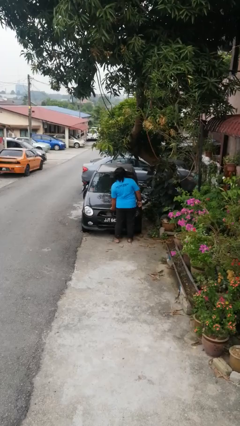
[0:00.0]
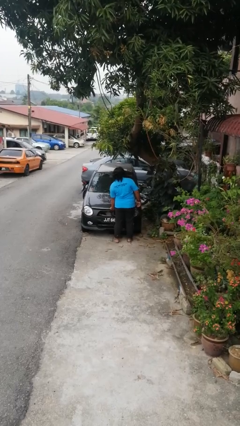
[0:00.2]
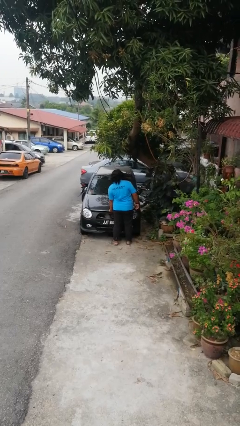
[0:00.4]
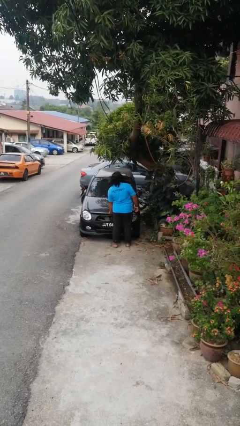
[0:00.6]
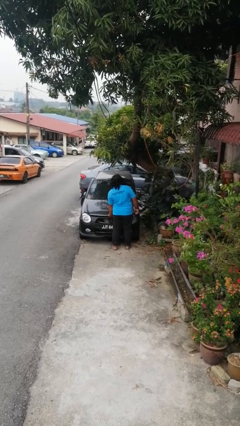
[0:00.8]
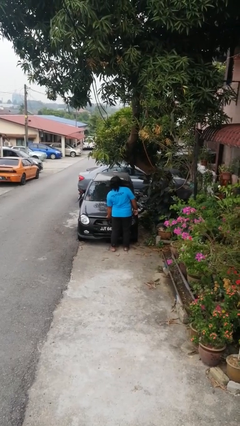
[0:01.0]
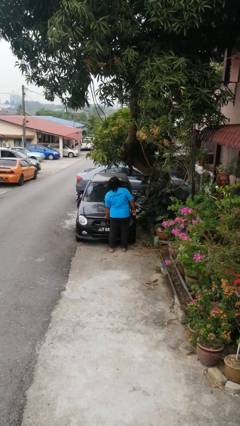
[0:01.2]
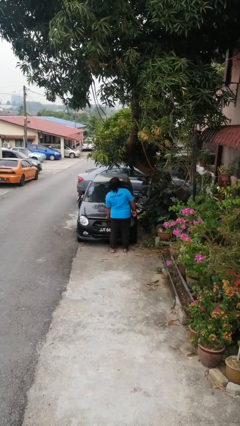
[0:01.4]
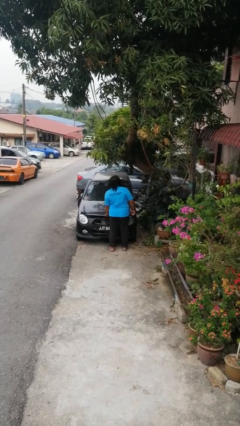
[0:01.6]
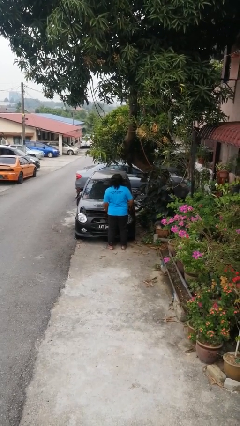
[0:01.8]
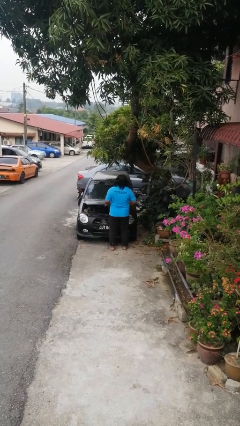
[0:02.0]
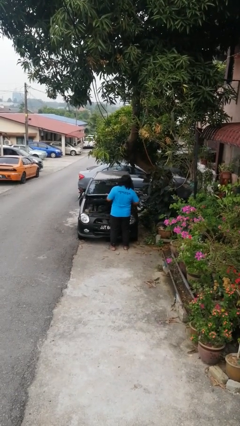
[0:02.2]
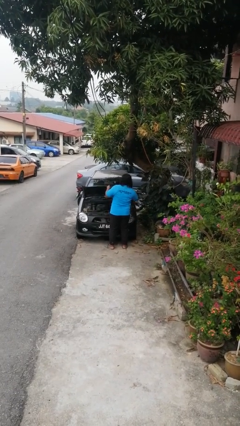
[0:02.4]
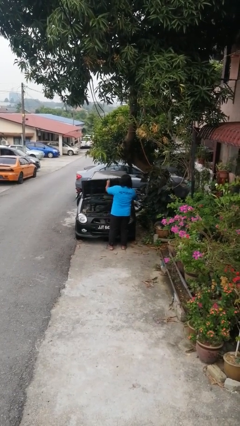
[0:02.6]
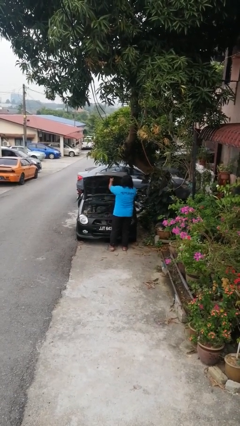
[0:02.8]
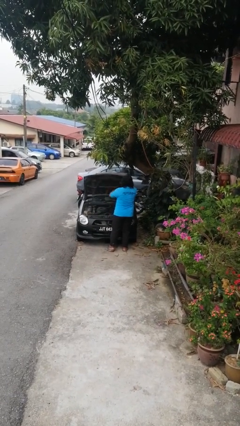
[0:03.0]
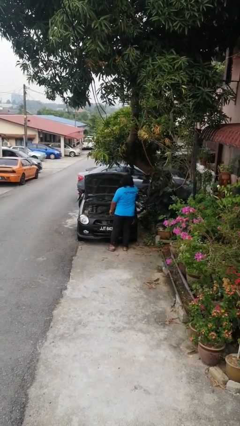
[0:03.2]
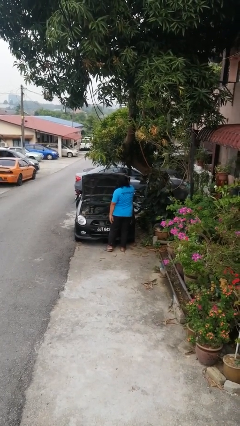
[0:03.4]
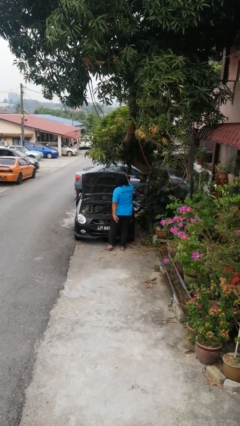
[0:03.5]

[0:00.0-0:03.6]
person opens car hood

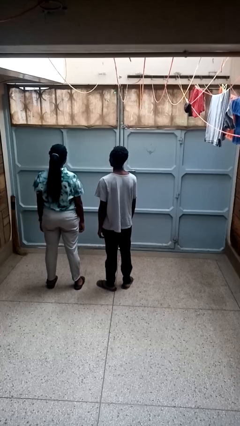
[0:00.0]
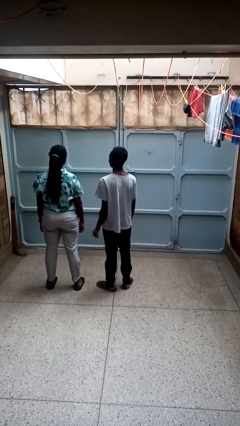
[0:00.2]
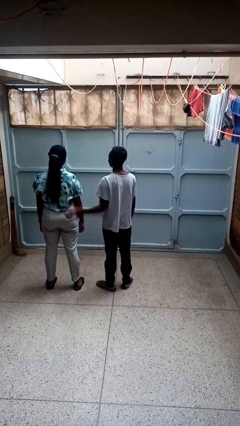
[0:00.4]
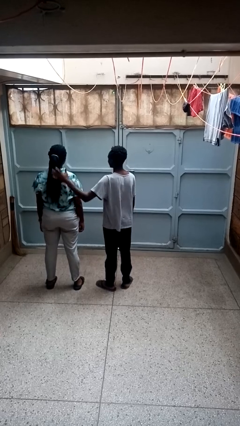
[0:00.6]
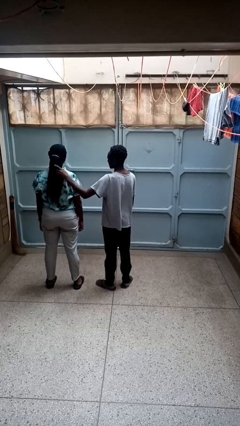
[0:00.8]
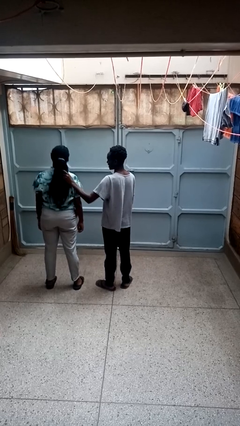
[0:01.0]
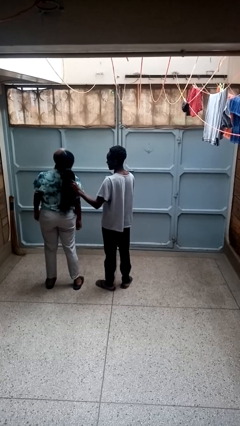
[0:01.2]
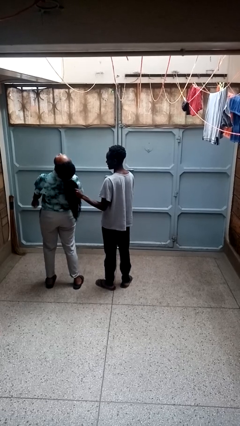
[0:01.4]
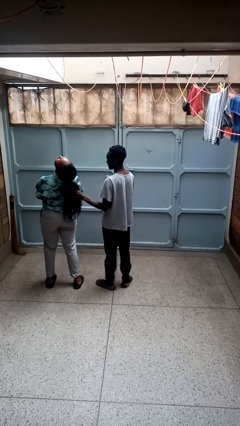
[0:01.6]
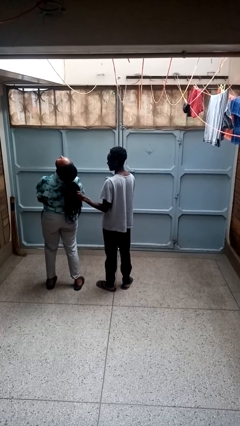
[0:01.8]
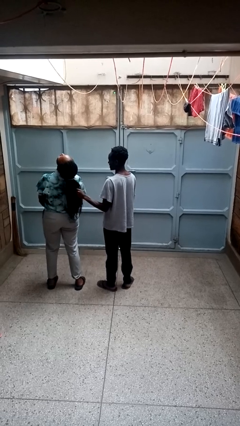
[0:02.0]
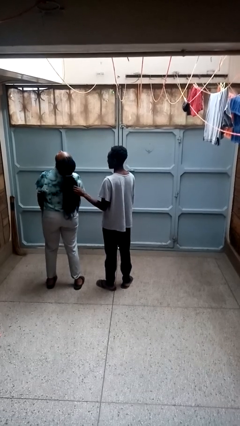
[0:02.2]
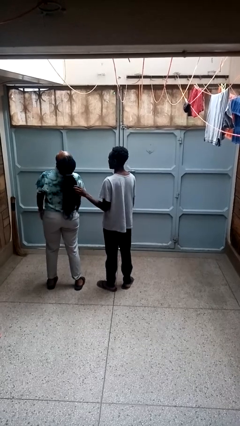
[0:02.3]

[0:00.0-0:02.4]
person grabs person by hair

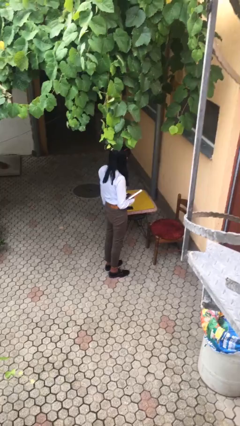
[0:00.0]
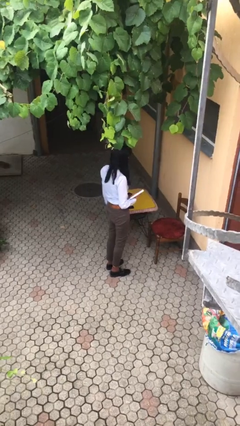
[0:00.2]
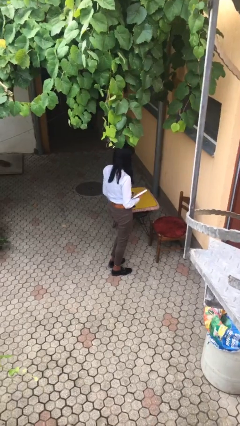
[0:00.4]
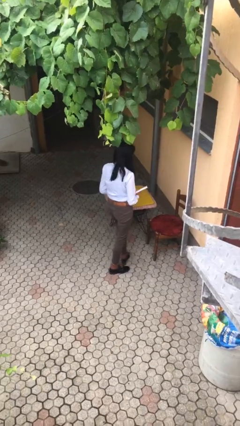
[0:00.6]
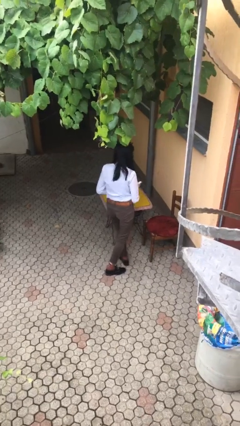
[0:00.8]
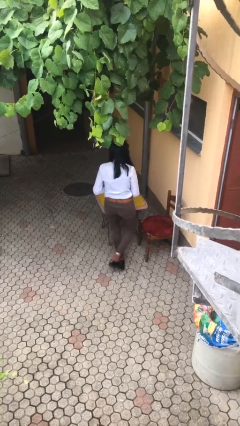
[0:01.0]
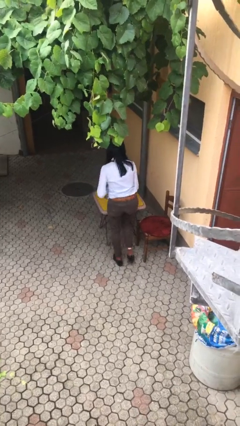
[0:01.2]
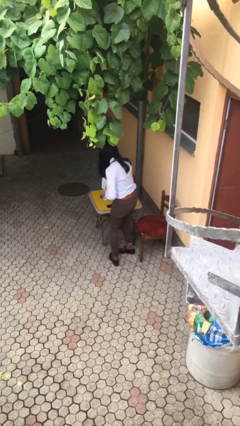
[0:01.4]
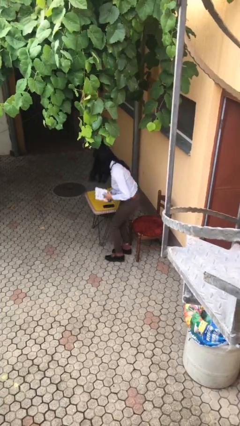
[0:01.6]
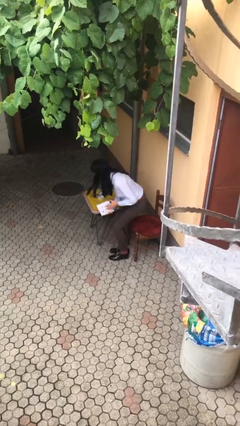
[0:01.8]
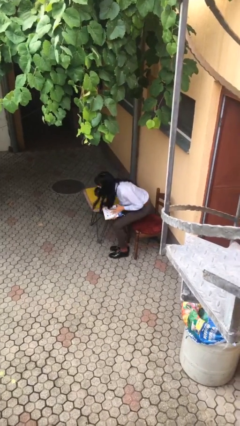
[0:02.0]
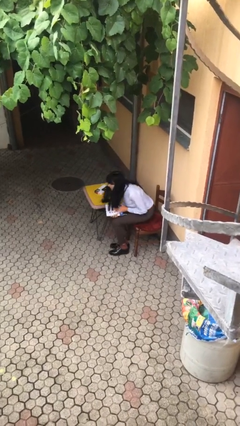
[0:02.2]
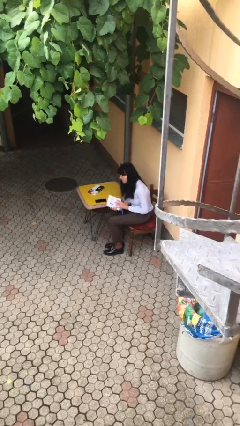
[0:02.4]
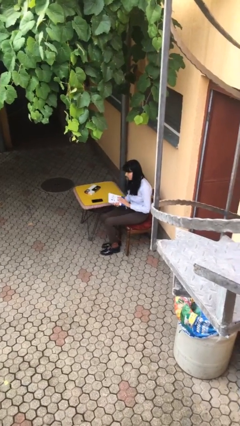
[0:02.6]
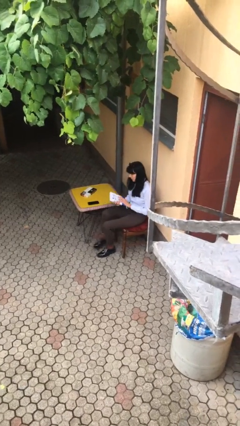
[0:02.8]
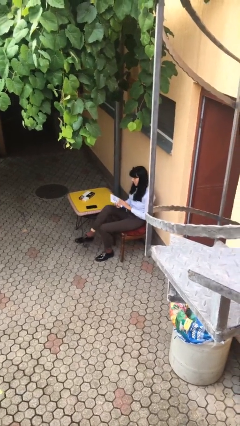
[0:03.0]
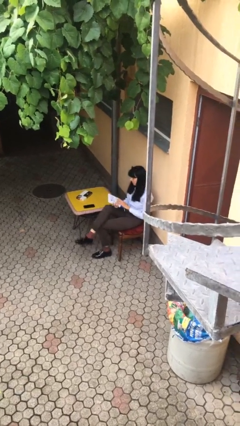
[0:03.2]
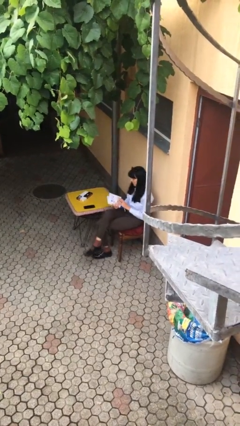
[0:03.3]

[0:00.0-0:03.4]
person sits down

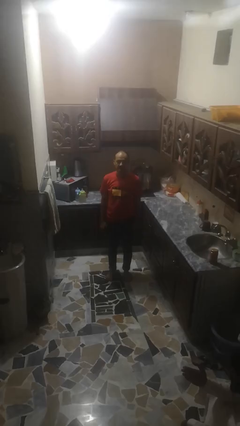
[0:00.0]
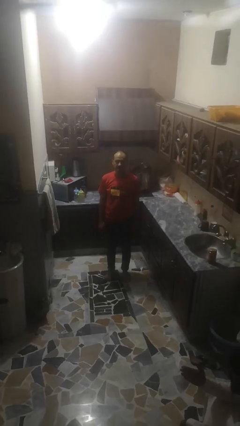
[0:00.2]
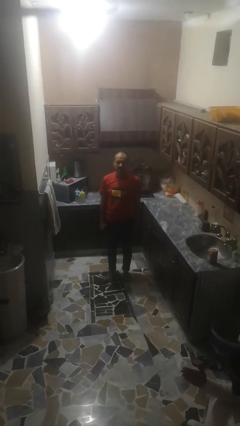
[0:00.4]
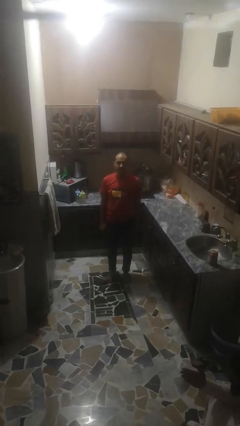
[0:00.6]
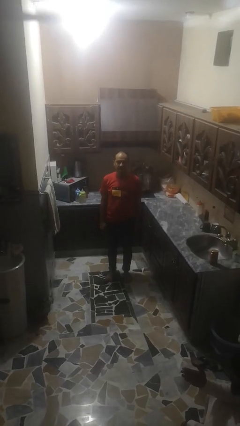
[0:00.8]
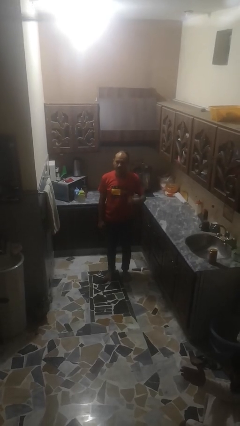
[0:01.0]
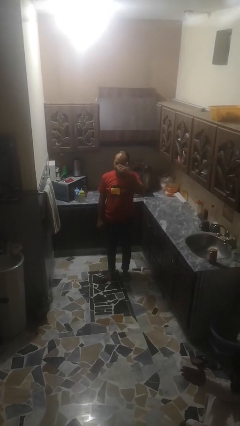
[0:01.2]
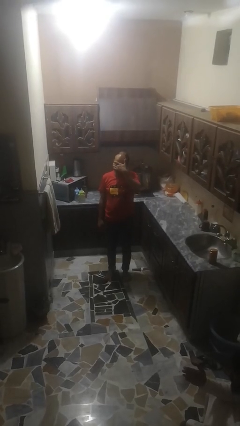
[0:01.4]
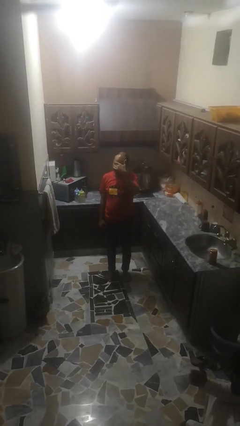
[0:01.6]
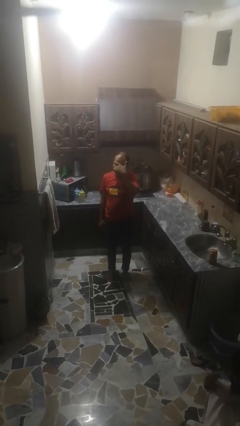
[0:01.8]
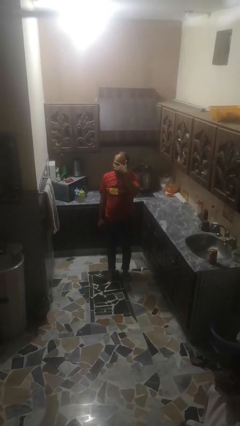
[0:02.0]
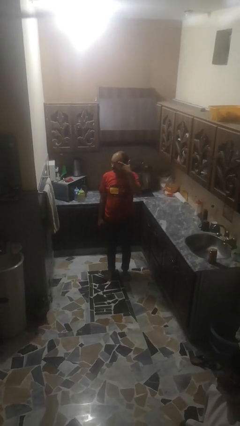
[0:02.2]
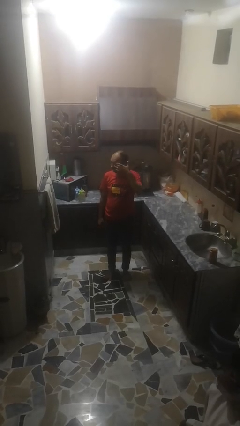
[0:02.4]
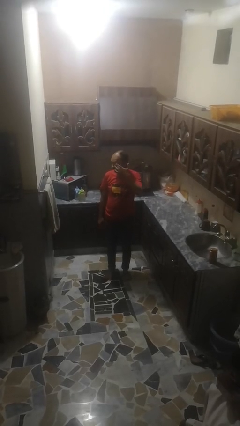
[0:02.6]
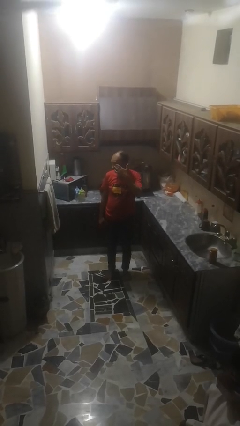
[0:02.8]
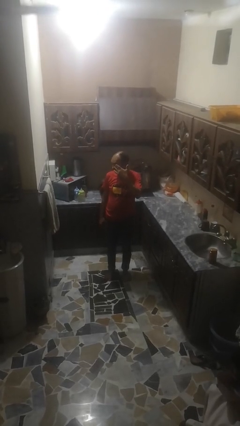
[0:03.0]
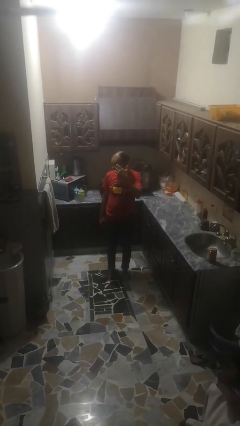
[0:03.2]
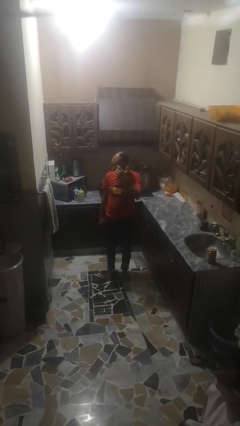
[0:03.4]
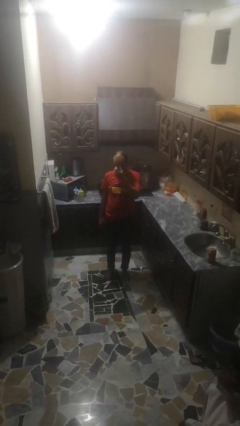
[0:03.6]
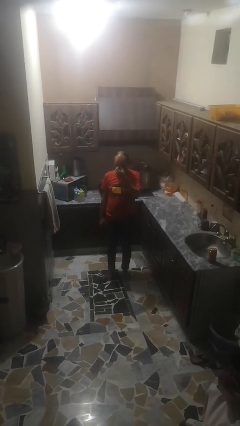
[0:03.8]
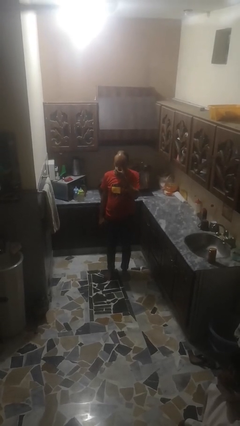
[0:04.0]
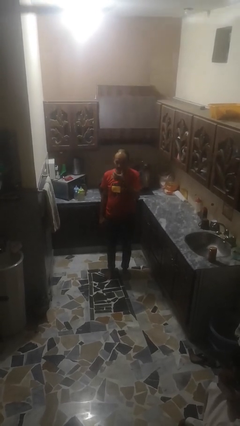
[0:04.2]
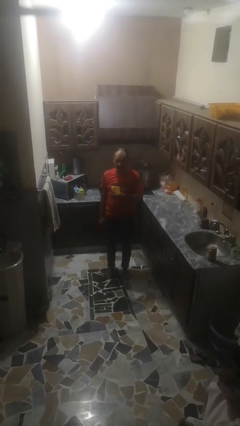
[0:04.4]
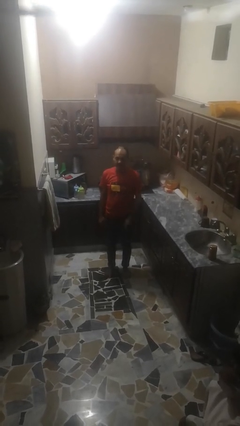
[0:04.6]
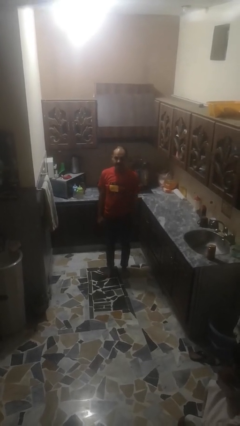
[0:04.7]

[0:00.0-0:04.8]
person rubs eyes

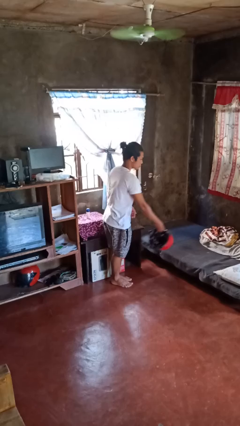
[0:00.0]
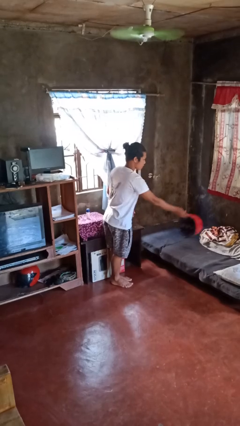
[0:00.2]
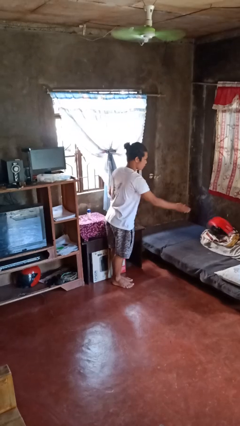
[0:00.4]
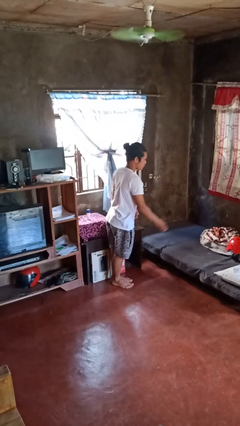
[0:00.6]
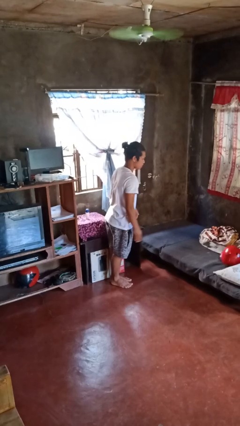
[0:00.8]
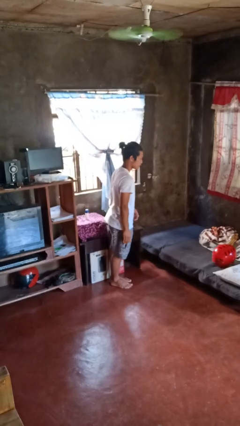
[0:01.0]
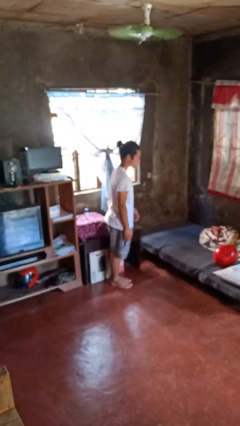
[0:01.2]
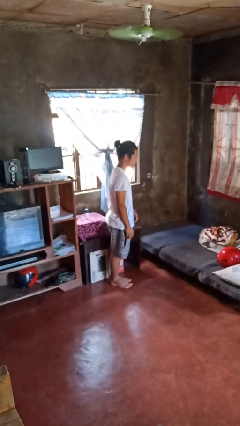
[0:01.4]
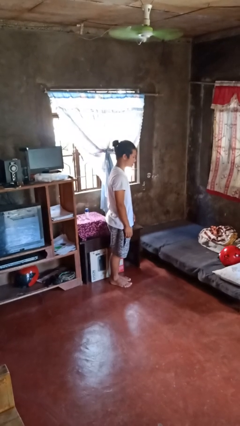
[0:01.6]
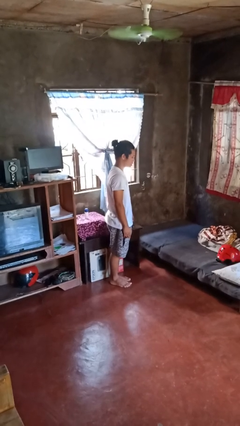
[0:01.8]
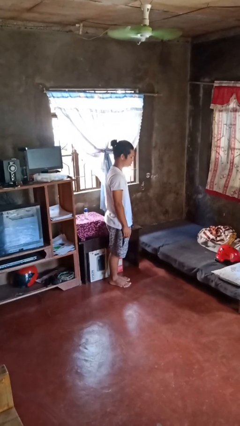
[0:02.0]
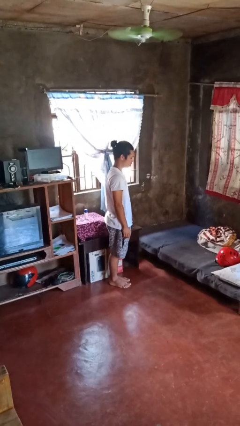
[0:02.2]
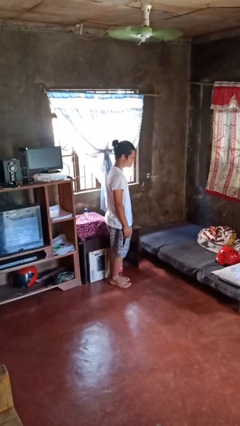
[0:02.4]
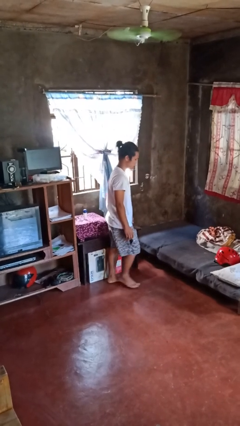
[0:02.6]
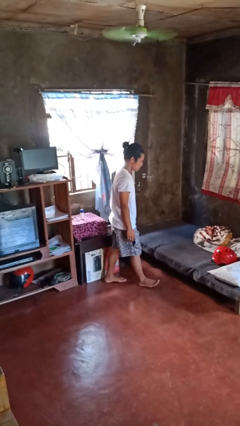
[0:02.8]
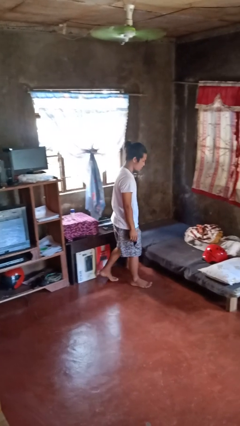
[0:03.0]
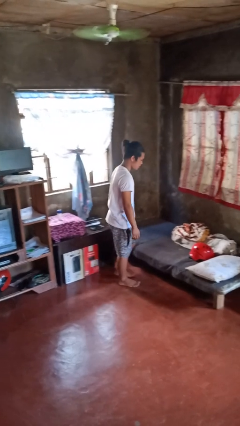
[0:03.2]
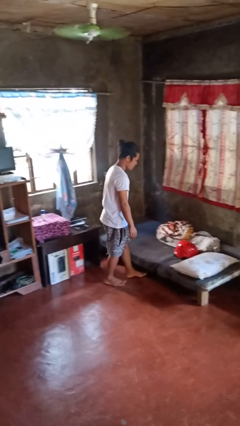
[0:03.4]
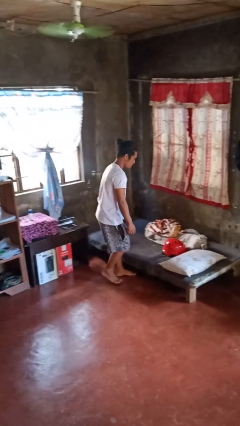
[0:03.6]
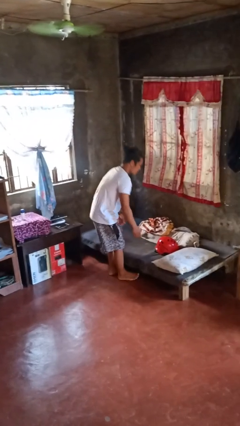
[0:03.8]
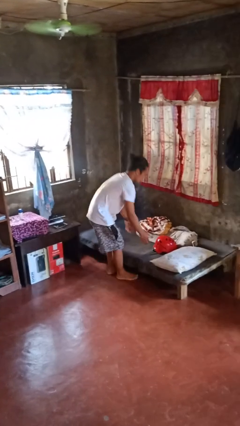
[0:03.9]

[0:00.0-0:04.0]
person throws object on bed
